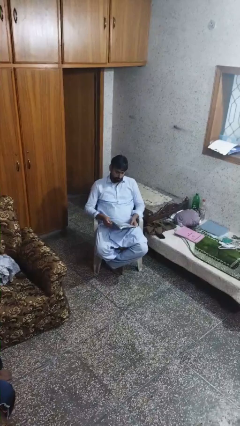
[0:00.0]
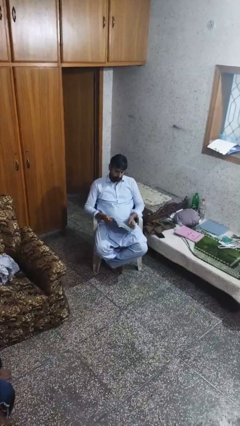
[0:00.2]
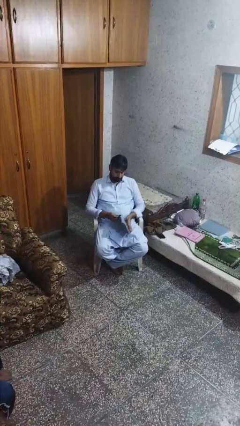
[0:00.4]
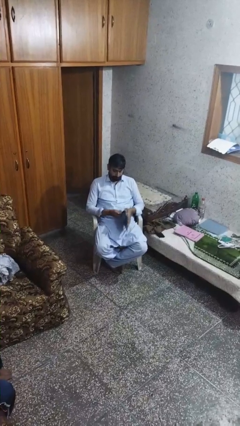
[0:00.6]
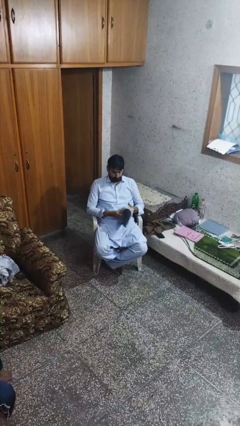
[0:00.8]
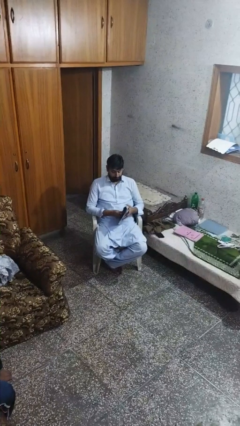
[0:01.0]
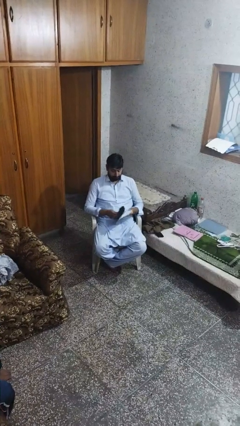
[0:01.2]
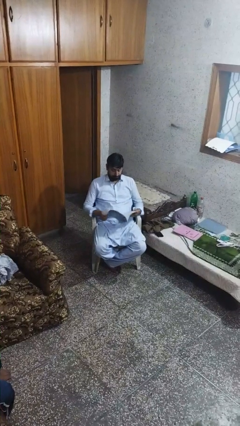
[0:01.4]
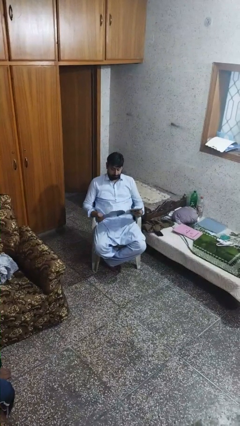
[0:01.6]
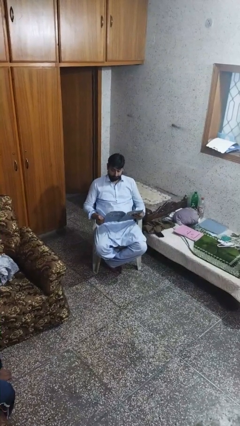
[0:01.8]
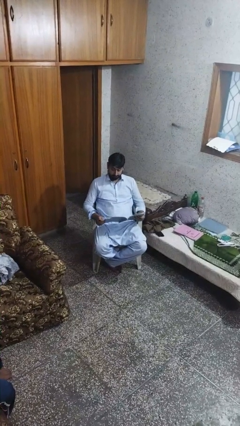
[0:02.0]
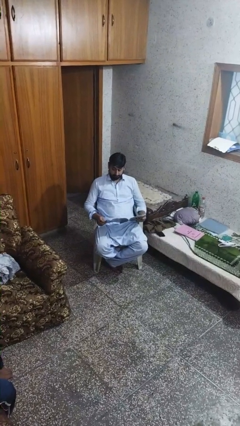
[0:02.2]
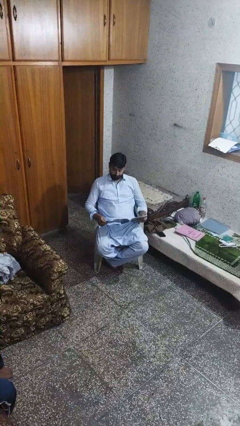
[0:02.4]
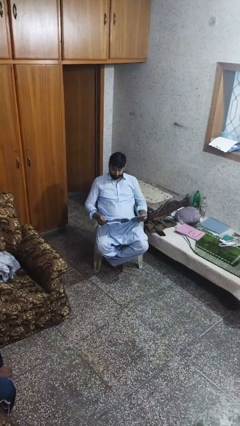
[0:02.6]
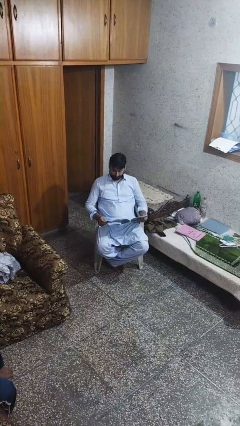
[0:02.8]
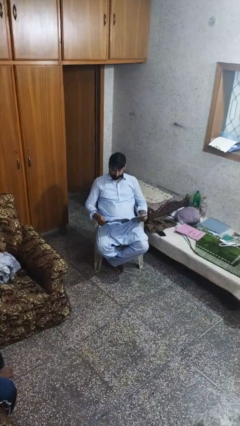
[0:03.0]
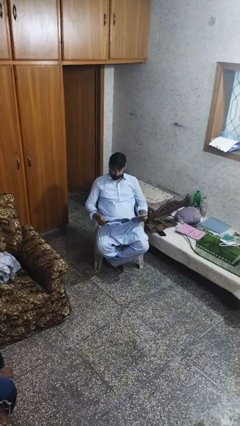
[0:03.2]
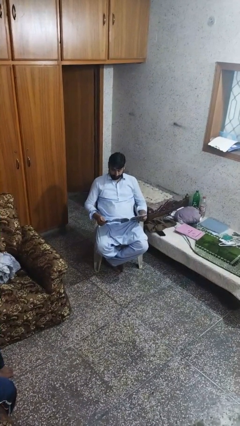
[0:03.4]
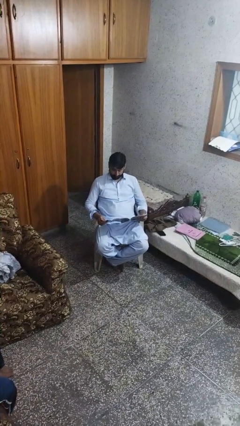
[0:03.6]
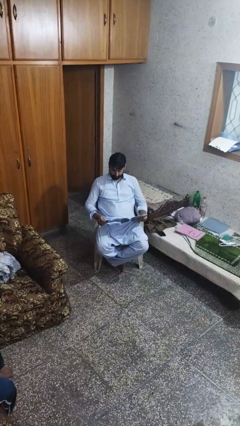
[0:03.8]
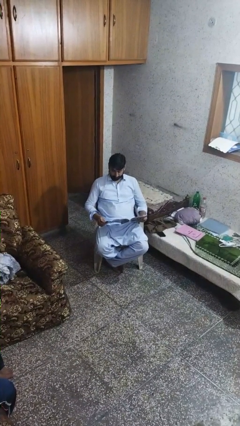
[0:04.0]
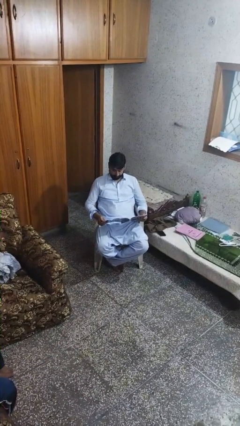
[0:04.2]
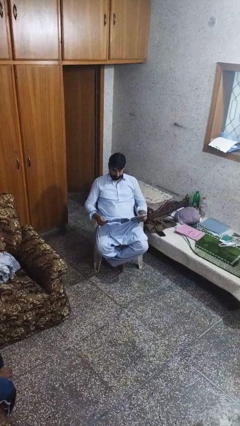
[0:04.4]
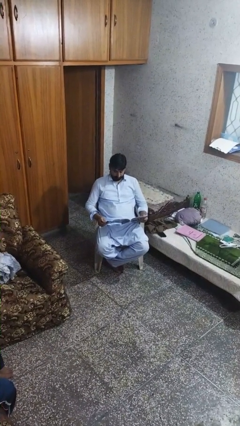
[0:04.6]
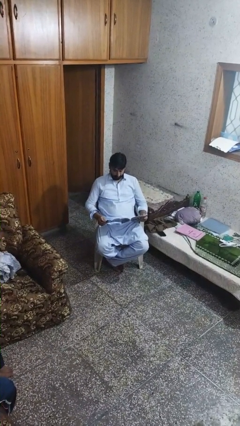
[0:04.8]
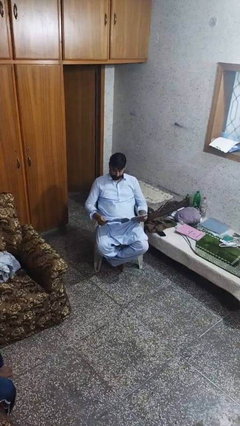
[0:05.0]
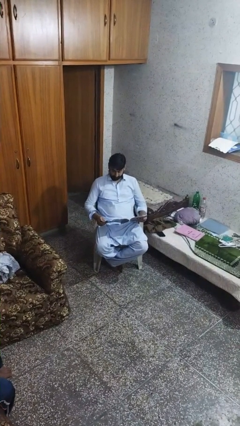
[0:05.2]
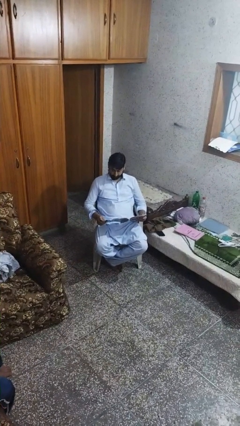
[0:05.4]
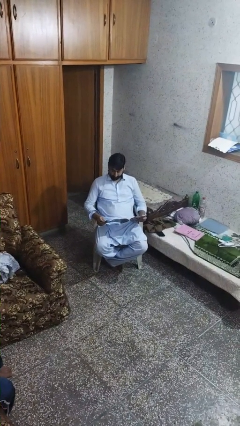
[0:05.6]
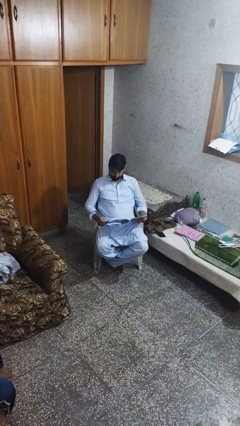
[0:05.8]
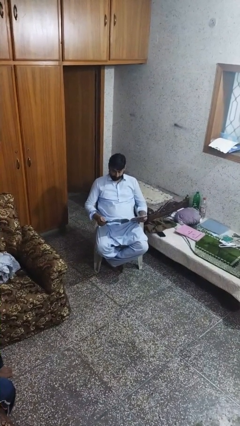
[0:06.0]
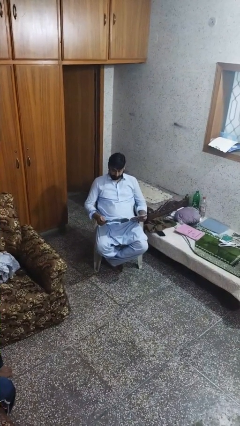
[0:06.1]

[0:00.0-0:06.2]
person reads book

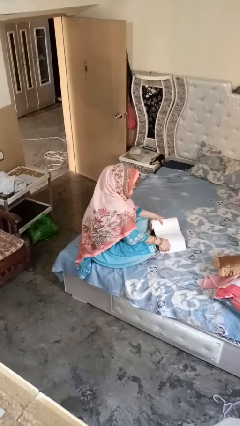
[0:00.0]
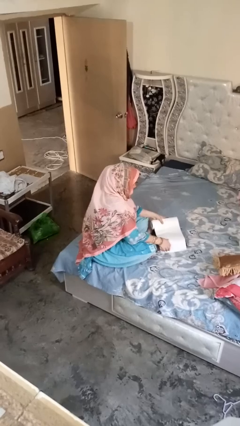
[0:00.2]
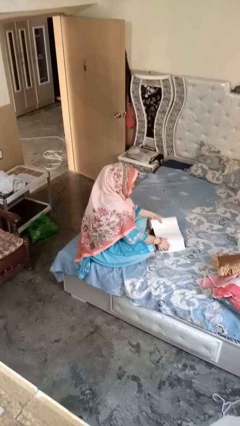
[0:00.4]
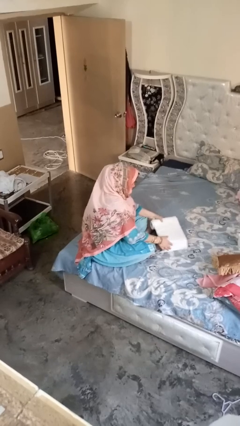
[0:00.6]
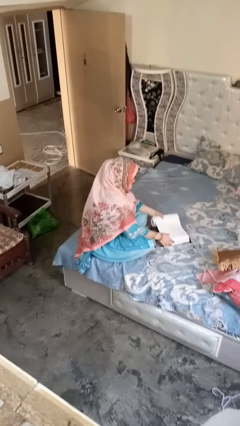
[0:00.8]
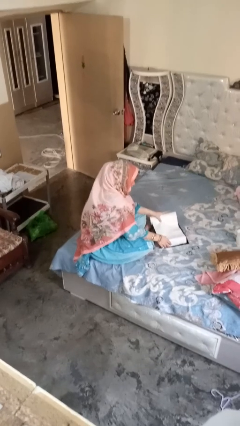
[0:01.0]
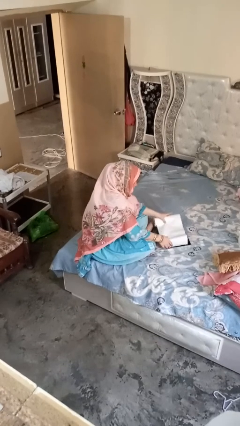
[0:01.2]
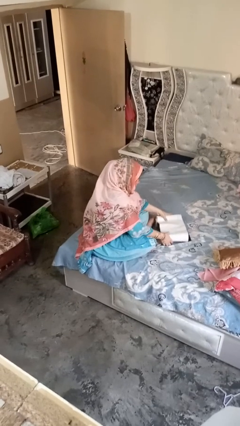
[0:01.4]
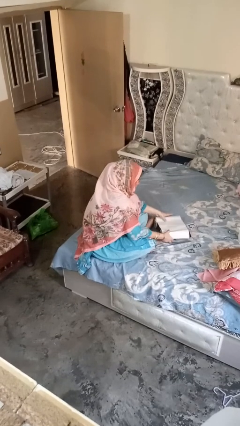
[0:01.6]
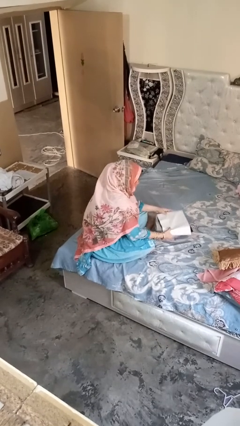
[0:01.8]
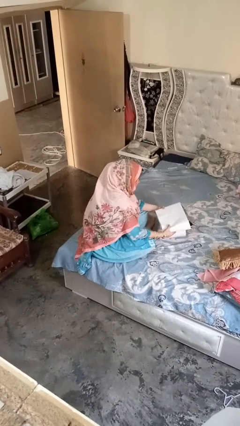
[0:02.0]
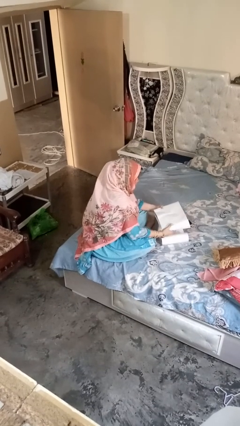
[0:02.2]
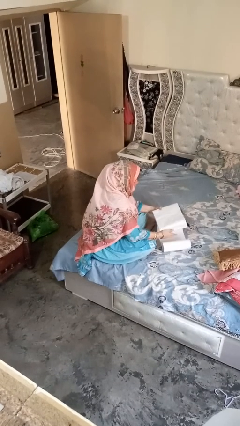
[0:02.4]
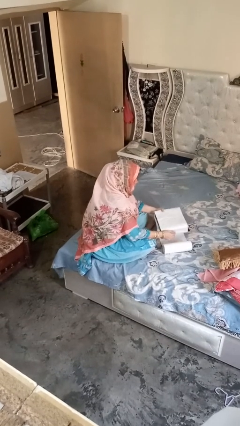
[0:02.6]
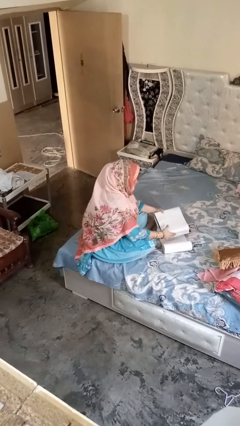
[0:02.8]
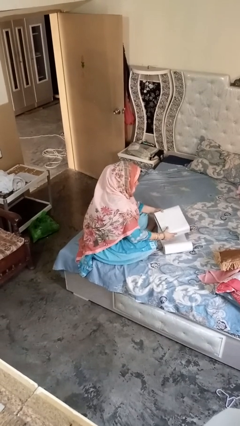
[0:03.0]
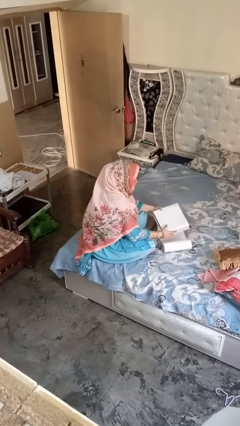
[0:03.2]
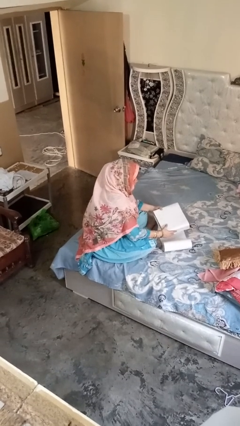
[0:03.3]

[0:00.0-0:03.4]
person wraps box

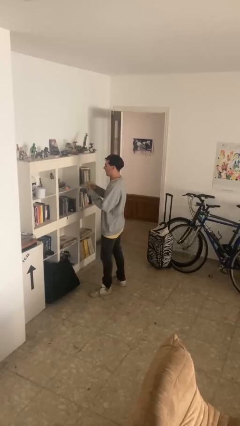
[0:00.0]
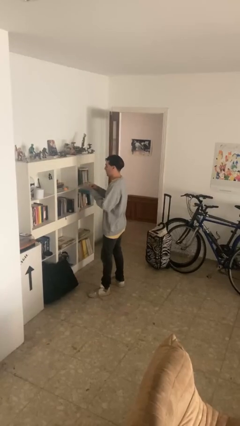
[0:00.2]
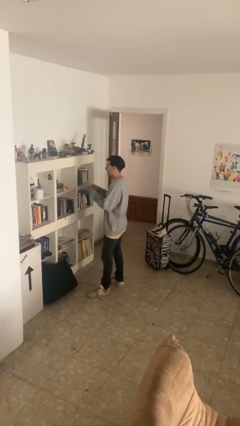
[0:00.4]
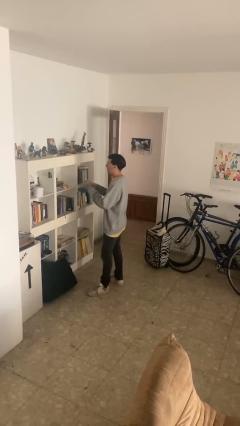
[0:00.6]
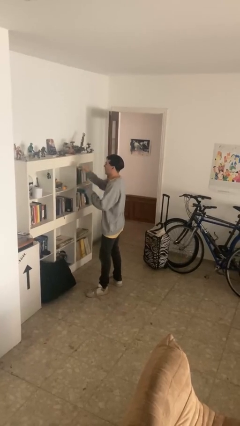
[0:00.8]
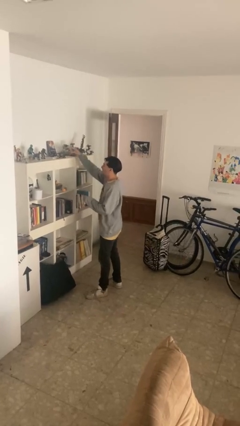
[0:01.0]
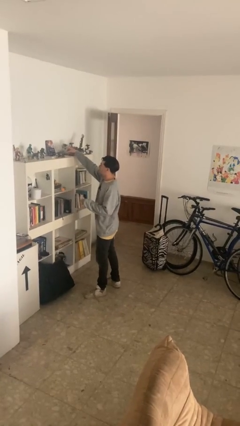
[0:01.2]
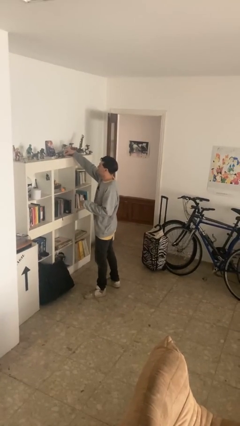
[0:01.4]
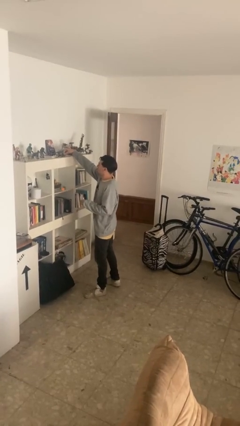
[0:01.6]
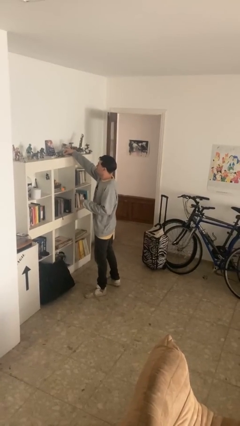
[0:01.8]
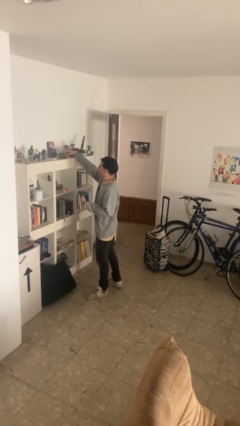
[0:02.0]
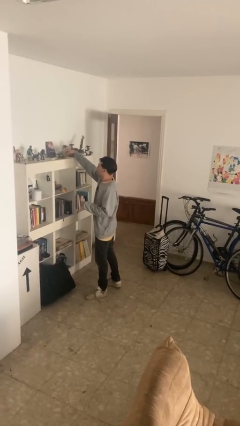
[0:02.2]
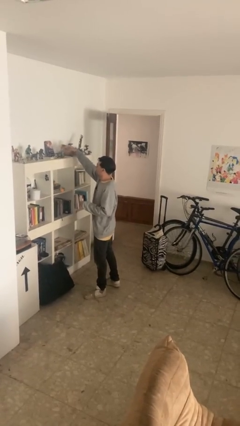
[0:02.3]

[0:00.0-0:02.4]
person puts down object on shelf

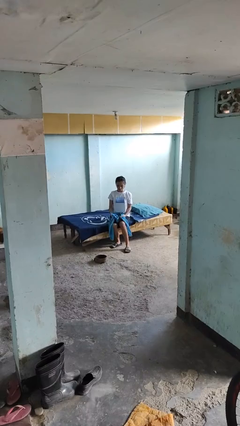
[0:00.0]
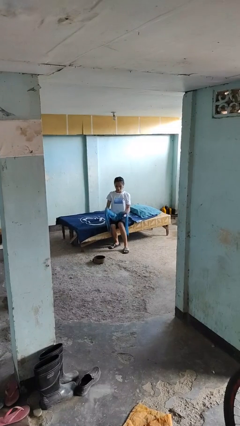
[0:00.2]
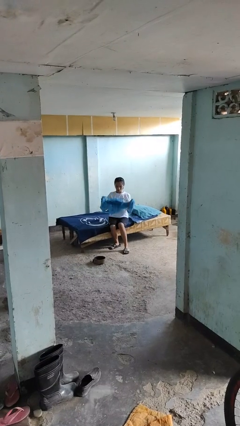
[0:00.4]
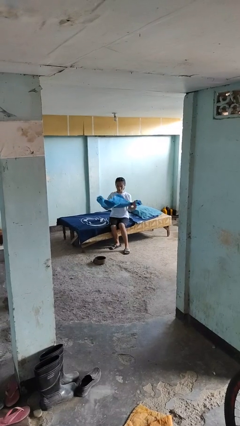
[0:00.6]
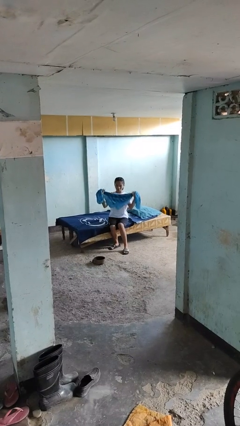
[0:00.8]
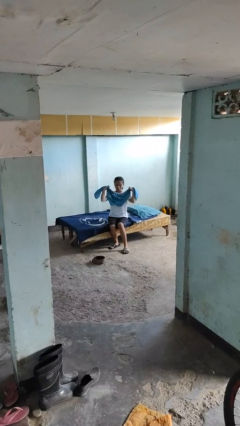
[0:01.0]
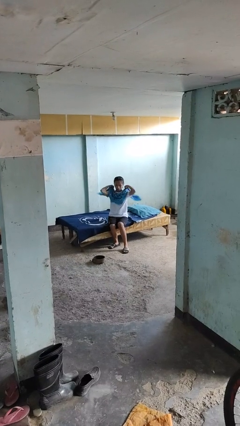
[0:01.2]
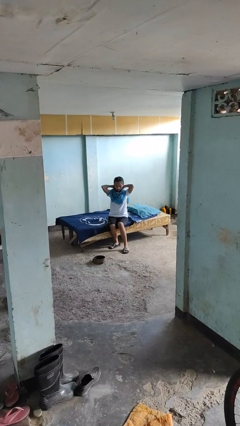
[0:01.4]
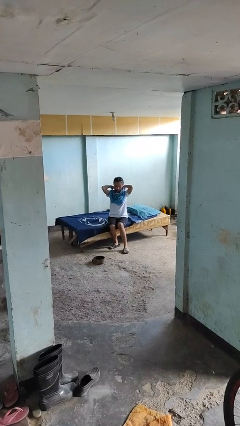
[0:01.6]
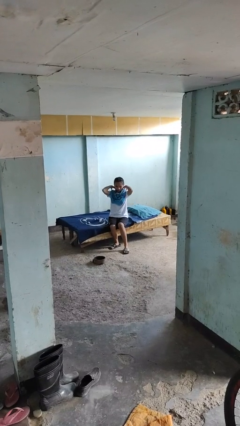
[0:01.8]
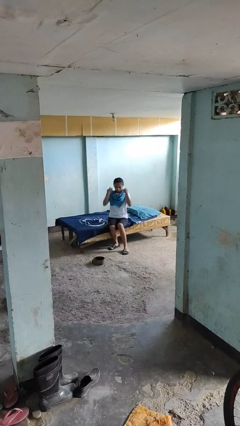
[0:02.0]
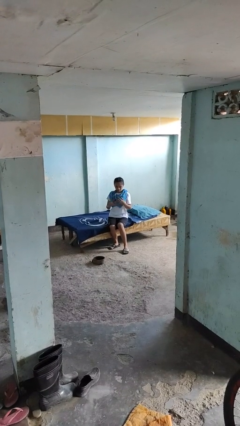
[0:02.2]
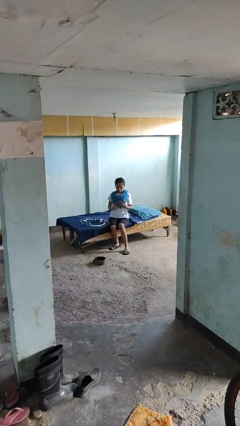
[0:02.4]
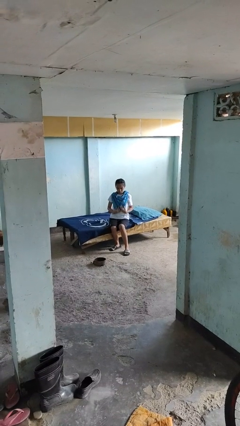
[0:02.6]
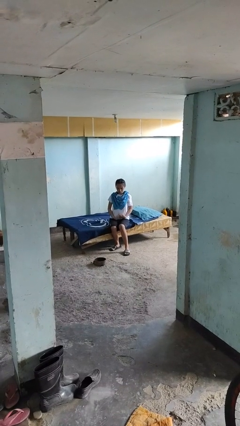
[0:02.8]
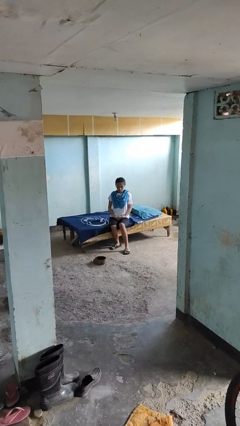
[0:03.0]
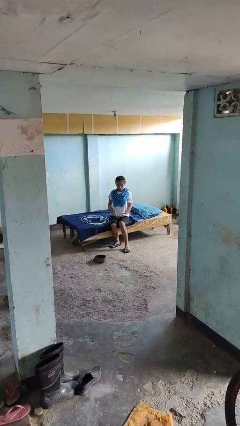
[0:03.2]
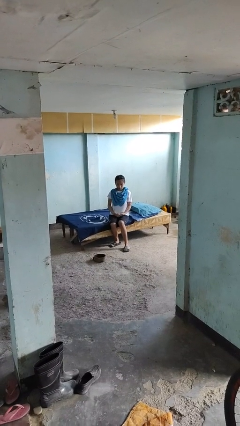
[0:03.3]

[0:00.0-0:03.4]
person puts on scarf

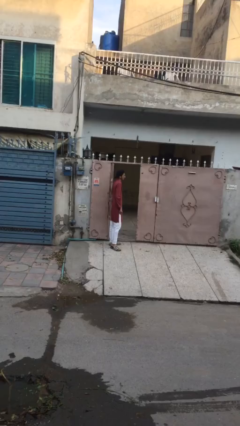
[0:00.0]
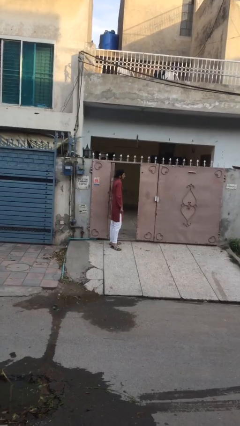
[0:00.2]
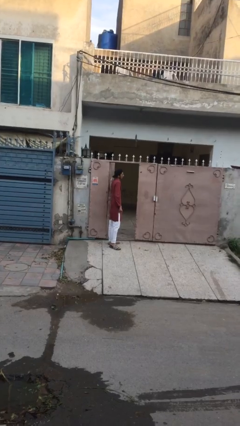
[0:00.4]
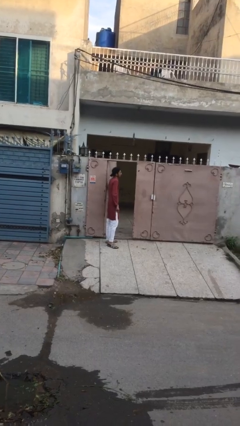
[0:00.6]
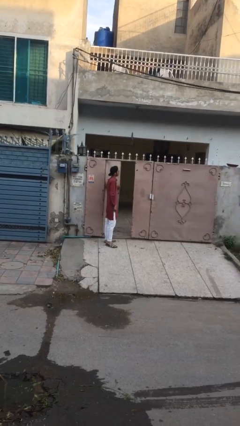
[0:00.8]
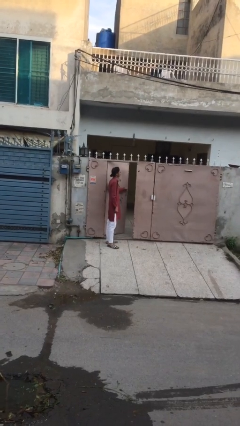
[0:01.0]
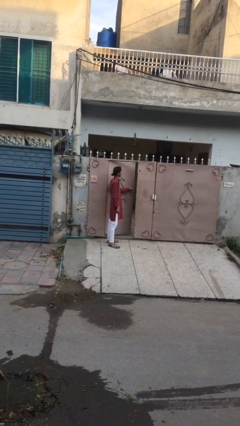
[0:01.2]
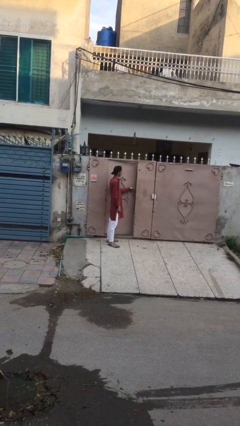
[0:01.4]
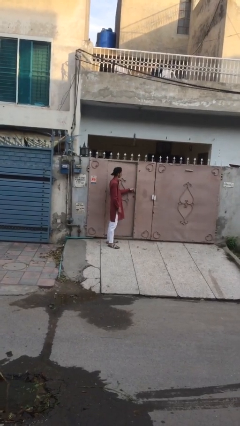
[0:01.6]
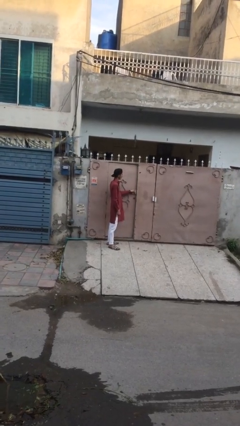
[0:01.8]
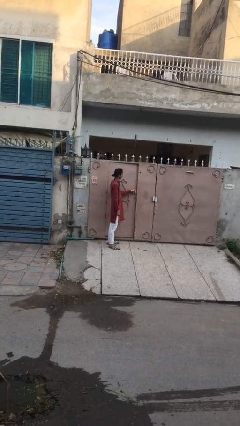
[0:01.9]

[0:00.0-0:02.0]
person closes facility door
